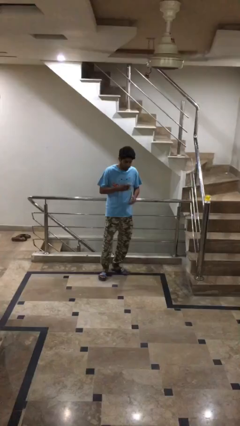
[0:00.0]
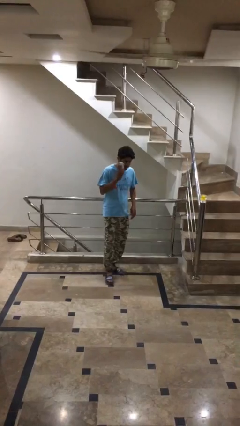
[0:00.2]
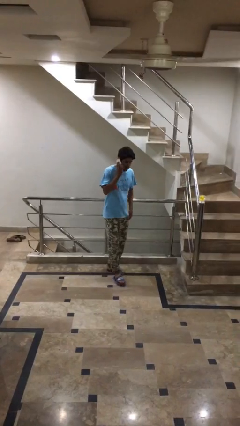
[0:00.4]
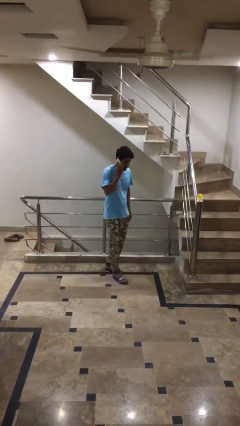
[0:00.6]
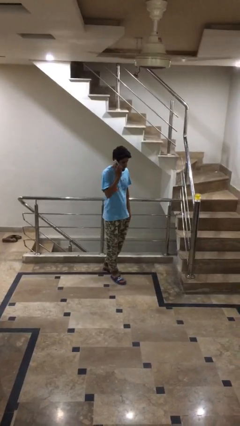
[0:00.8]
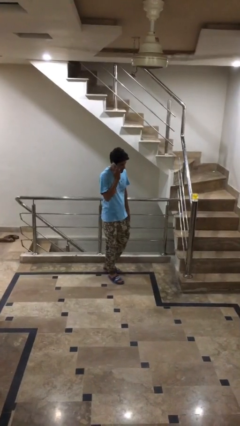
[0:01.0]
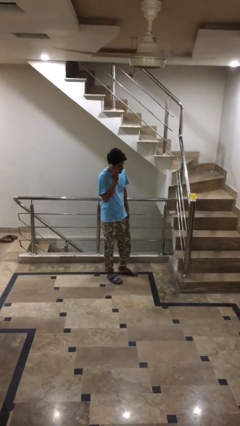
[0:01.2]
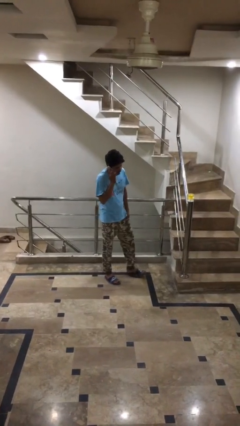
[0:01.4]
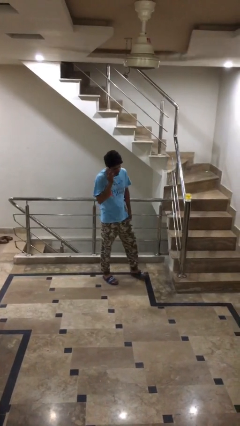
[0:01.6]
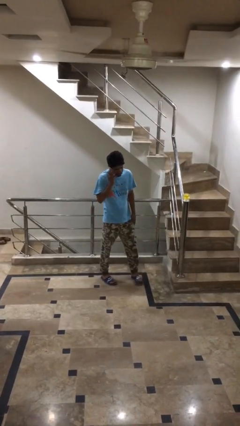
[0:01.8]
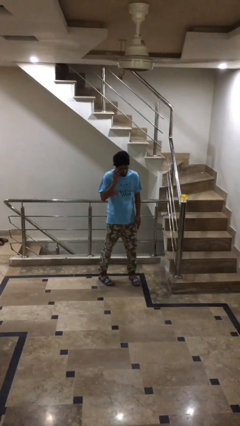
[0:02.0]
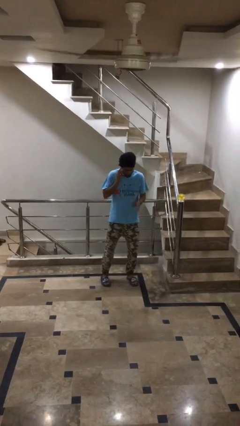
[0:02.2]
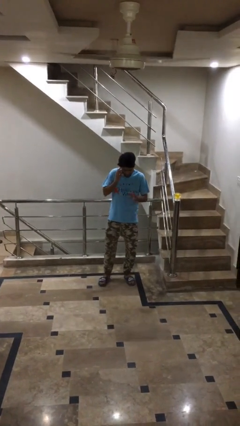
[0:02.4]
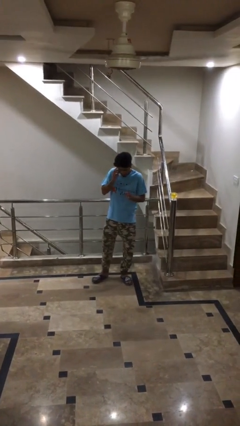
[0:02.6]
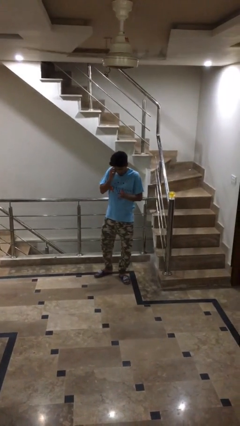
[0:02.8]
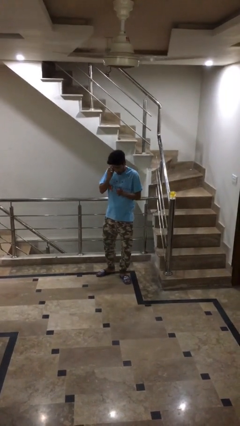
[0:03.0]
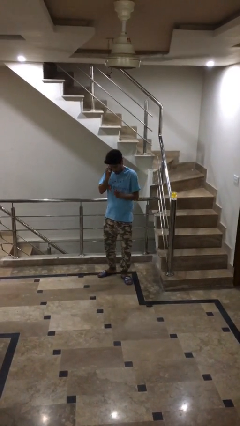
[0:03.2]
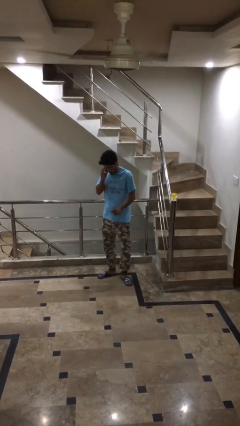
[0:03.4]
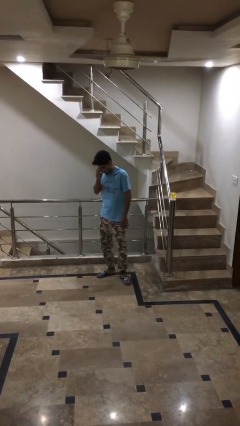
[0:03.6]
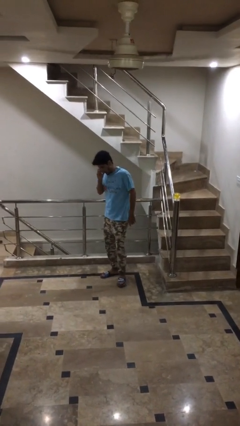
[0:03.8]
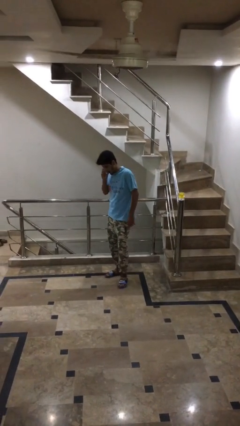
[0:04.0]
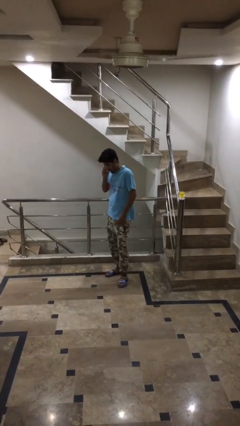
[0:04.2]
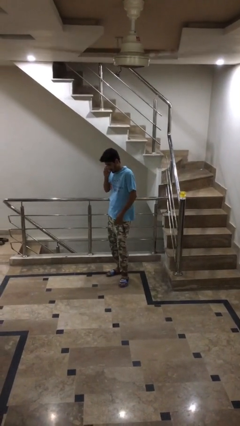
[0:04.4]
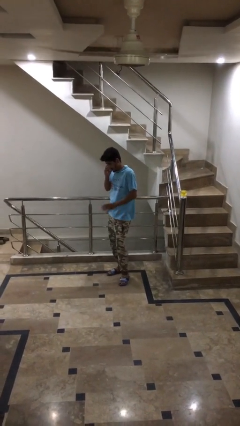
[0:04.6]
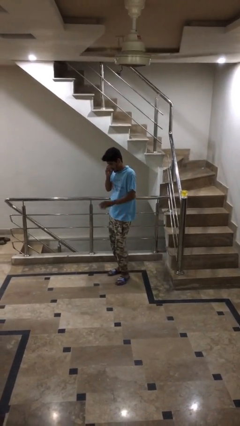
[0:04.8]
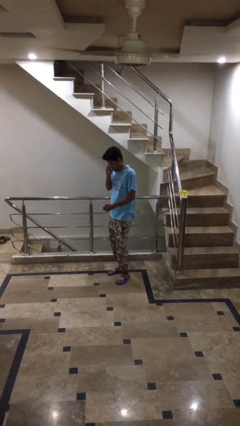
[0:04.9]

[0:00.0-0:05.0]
person talks on phone

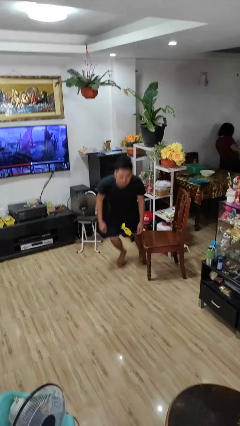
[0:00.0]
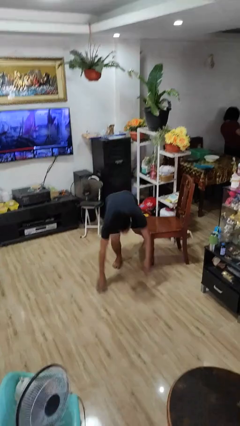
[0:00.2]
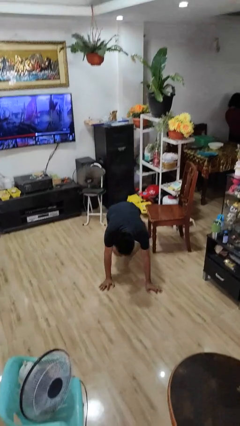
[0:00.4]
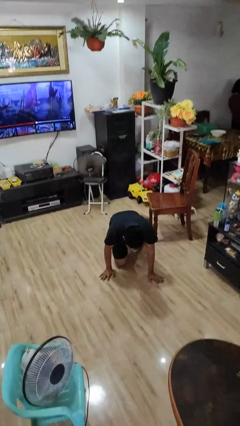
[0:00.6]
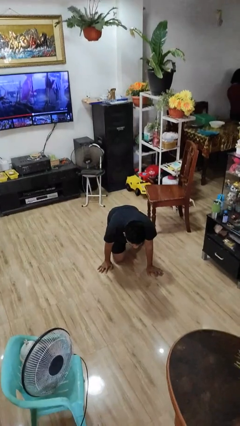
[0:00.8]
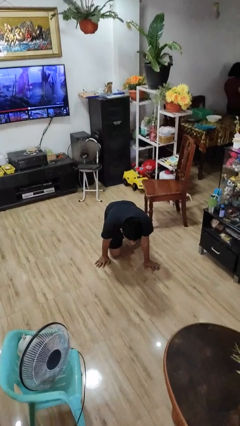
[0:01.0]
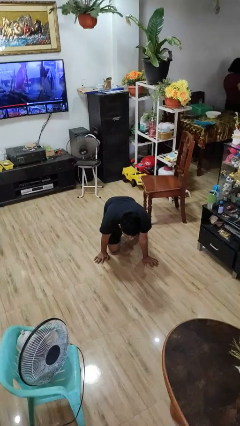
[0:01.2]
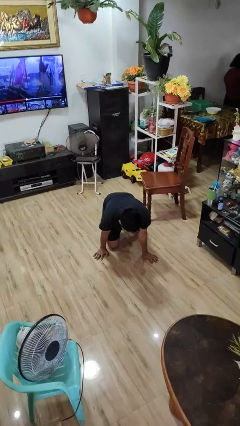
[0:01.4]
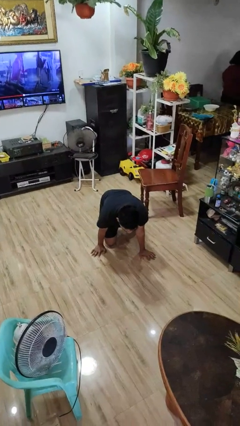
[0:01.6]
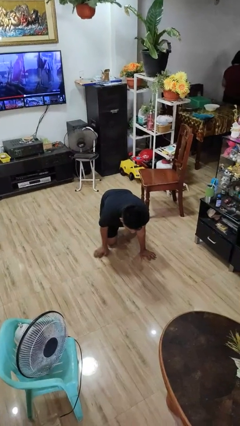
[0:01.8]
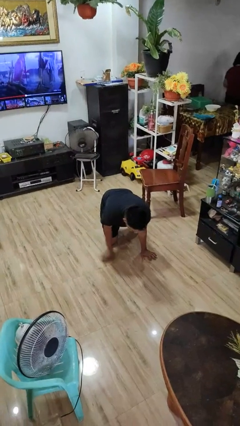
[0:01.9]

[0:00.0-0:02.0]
person trips on object on floor

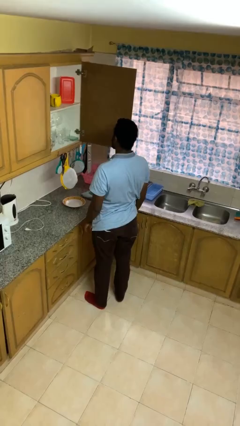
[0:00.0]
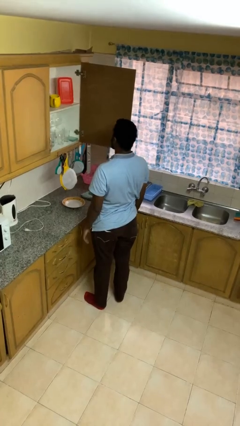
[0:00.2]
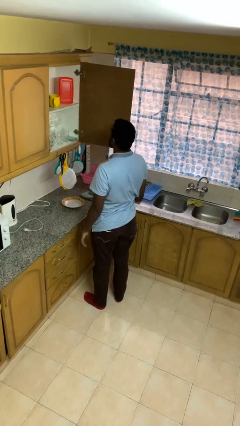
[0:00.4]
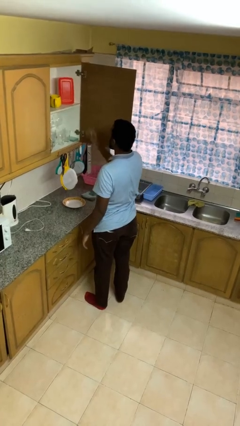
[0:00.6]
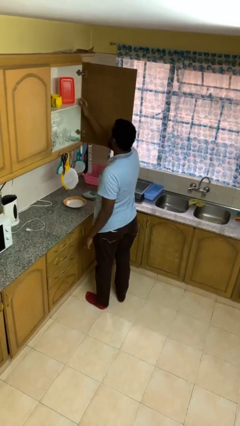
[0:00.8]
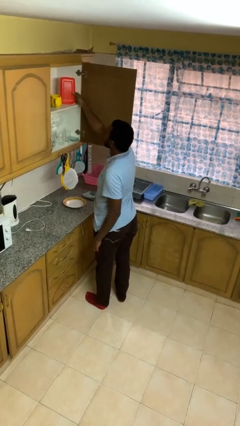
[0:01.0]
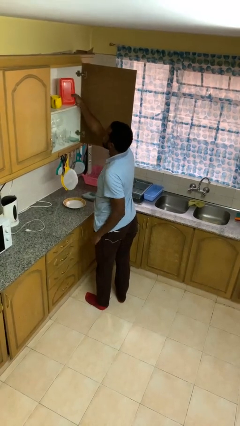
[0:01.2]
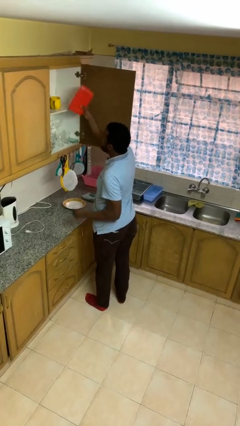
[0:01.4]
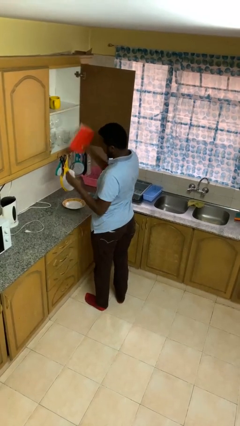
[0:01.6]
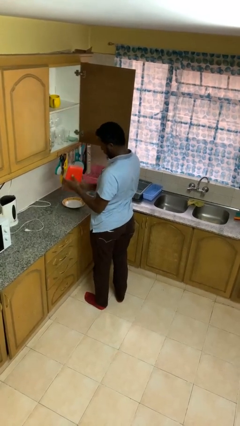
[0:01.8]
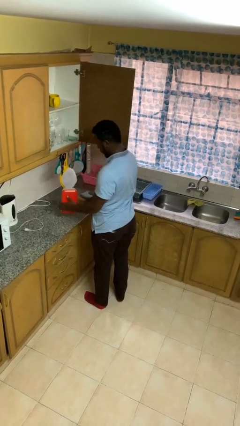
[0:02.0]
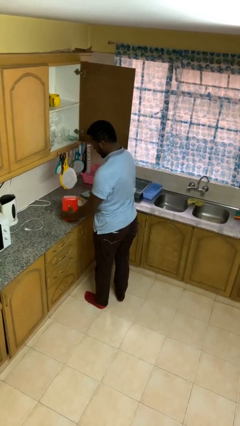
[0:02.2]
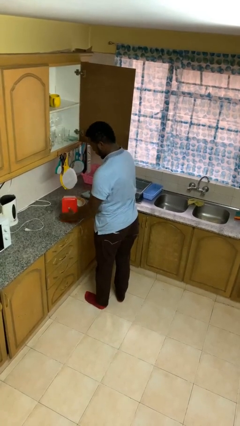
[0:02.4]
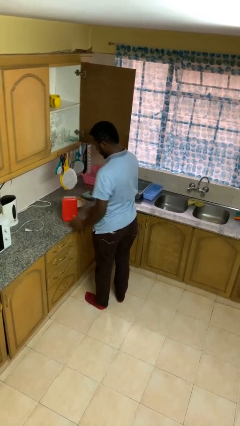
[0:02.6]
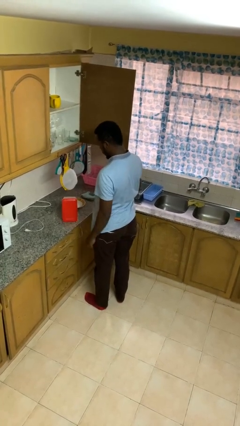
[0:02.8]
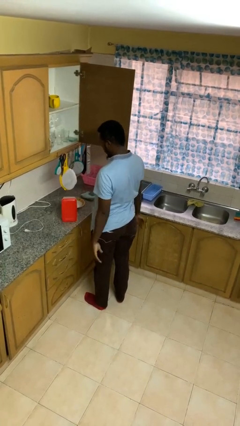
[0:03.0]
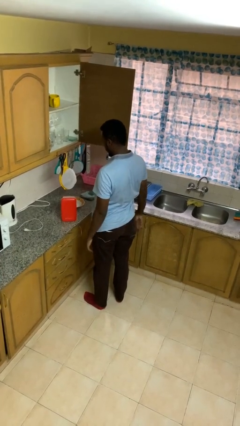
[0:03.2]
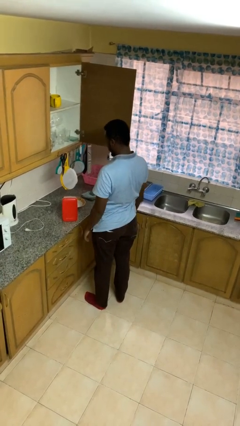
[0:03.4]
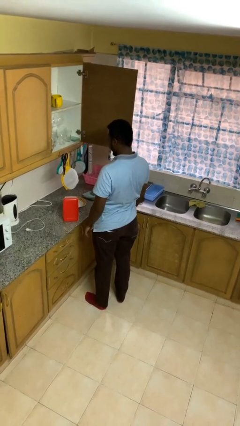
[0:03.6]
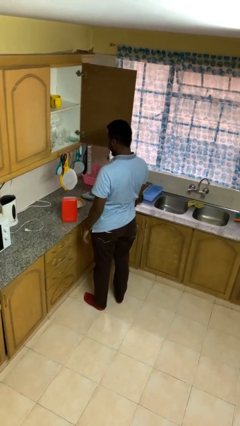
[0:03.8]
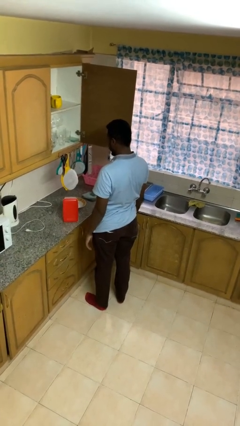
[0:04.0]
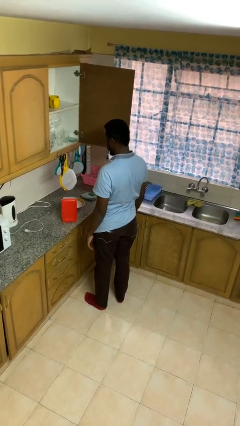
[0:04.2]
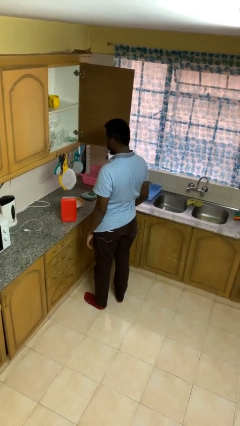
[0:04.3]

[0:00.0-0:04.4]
person takes object from cabinet

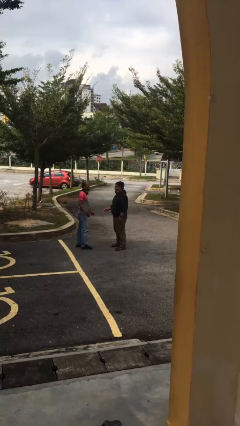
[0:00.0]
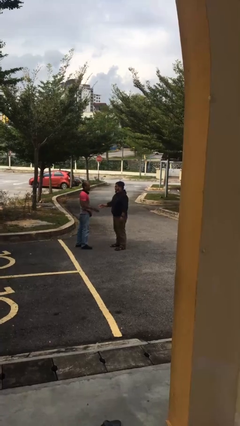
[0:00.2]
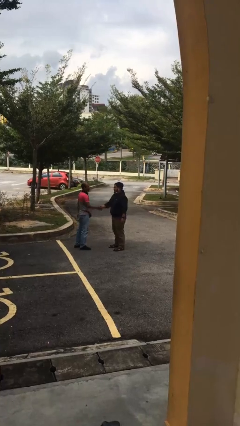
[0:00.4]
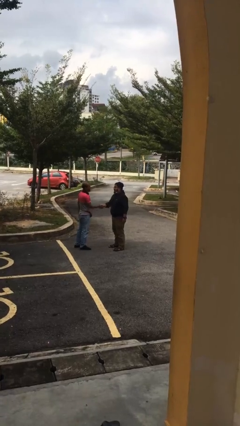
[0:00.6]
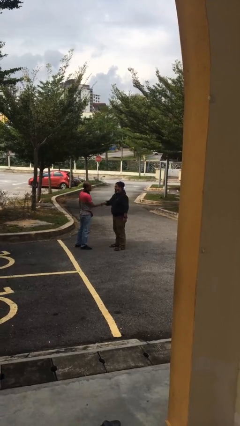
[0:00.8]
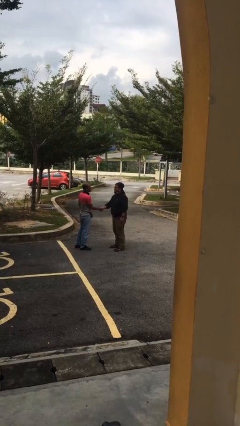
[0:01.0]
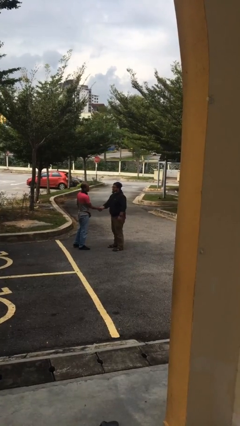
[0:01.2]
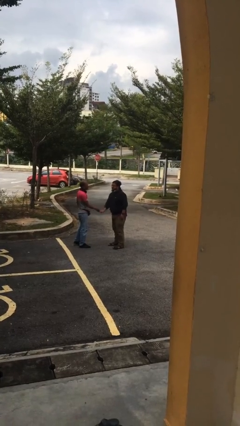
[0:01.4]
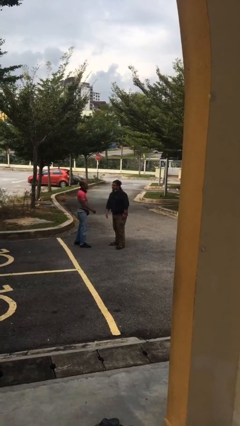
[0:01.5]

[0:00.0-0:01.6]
person shakes hand

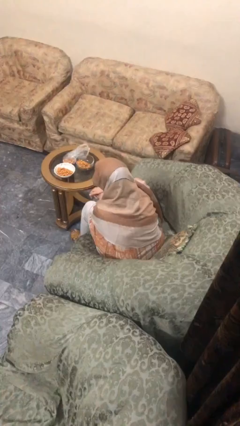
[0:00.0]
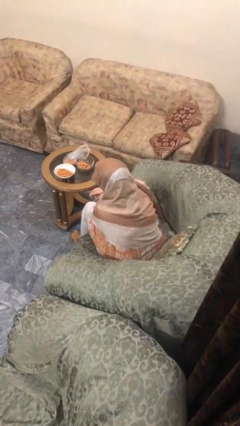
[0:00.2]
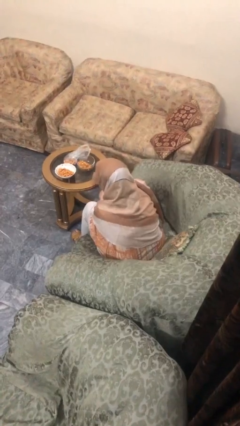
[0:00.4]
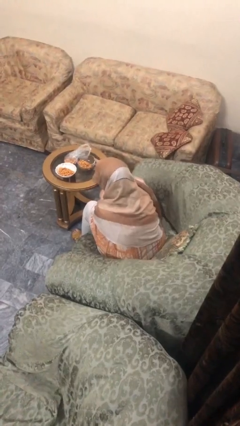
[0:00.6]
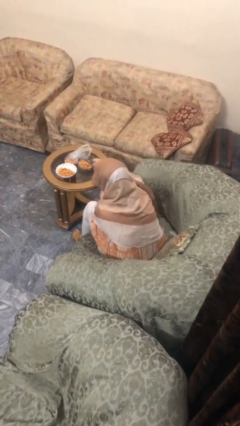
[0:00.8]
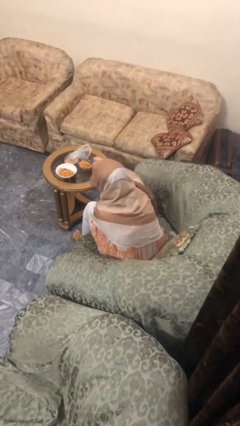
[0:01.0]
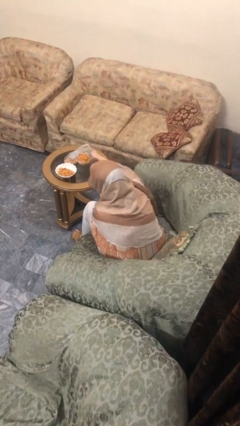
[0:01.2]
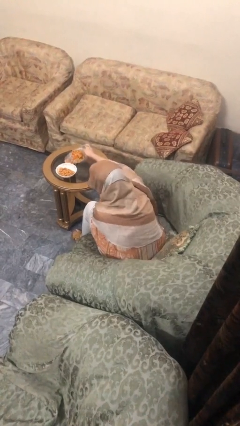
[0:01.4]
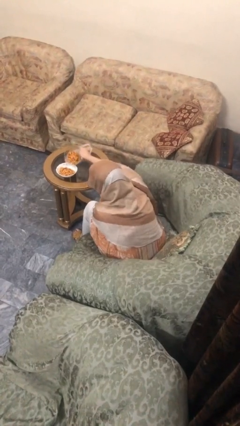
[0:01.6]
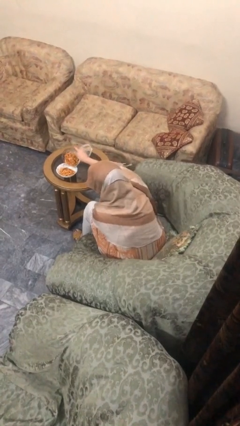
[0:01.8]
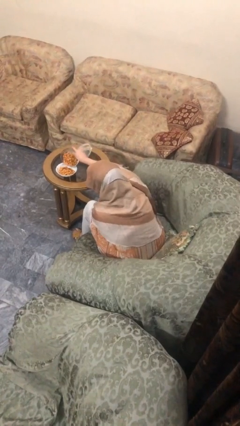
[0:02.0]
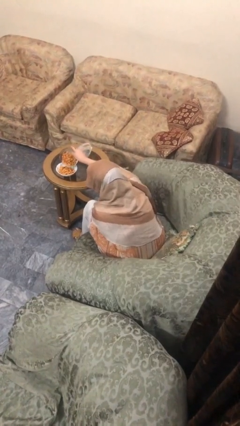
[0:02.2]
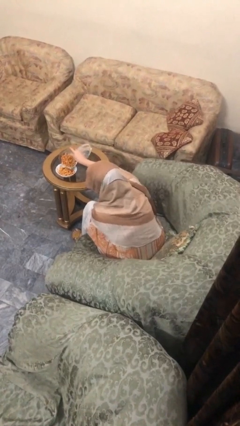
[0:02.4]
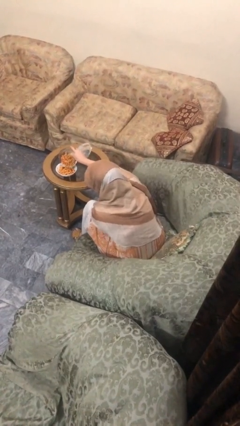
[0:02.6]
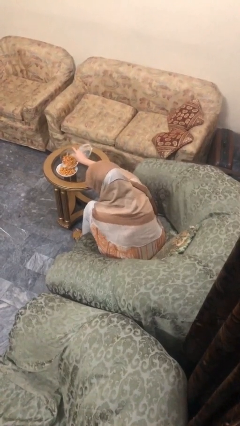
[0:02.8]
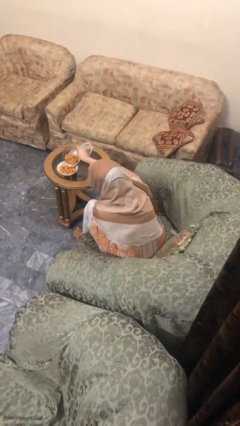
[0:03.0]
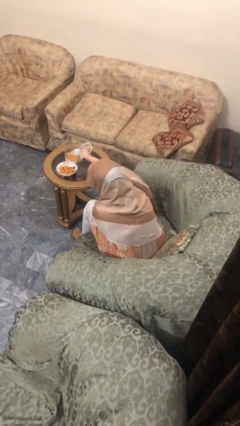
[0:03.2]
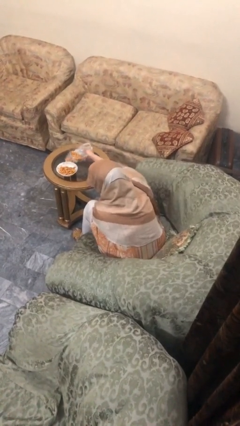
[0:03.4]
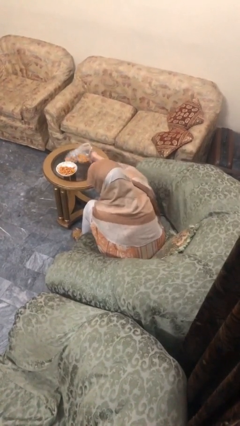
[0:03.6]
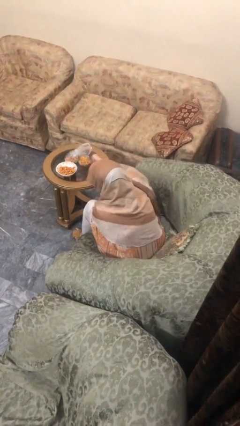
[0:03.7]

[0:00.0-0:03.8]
person pours into bowl

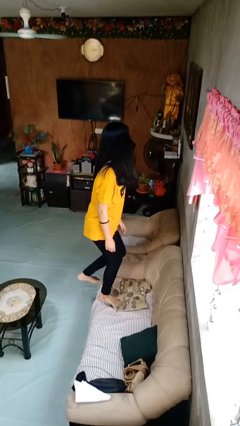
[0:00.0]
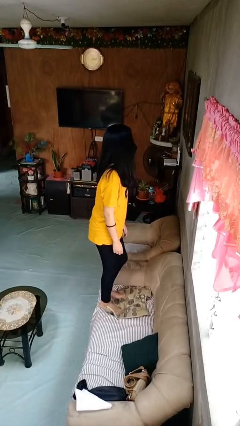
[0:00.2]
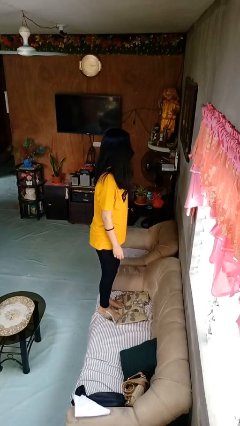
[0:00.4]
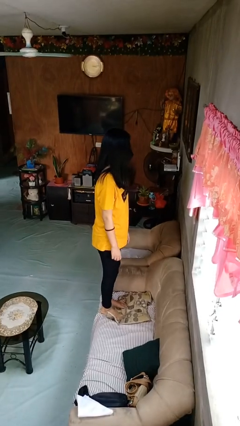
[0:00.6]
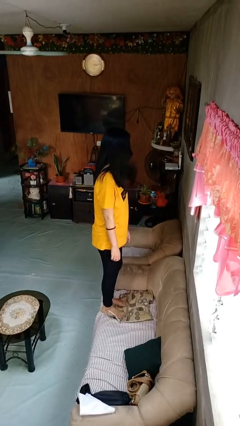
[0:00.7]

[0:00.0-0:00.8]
person climbs on couch
